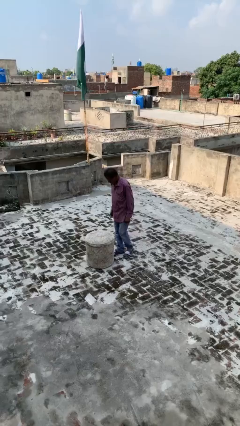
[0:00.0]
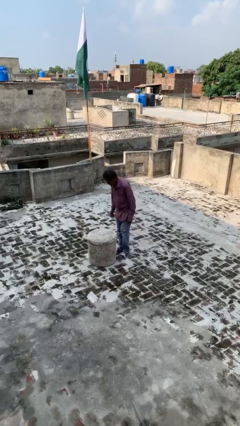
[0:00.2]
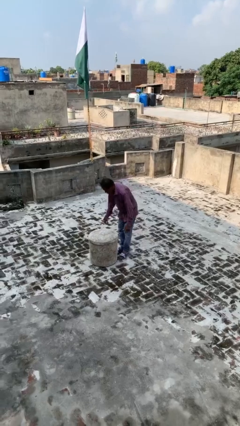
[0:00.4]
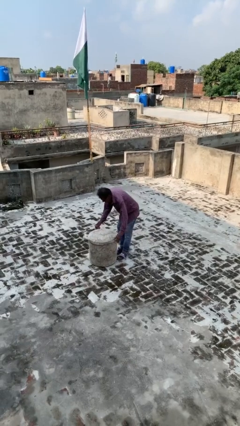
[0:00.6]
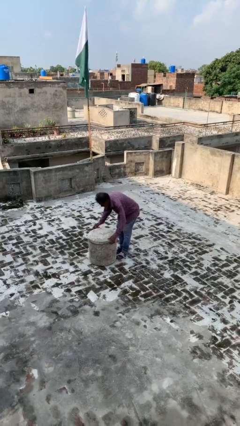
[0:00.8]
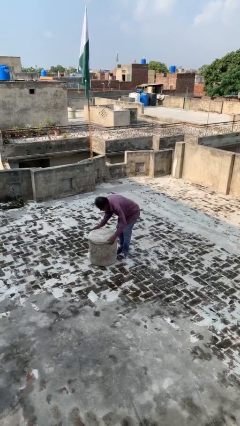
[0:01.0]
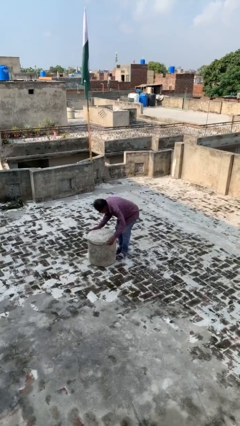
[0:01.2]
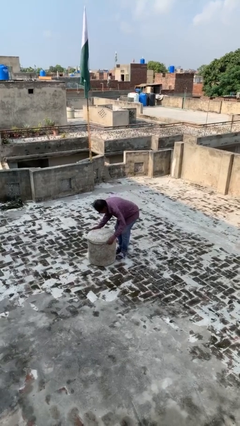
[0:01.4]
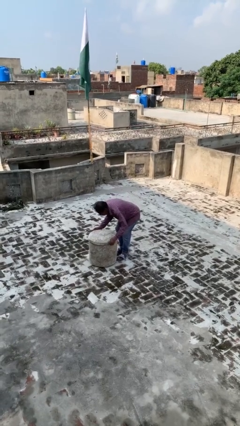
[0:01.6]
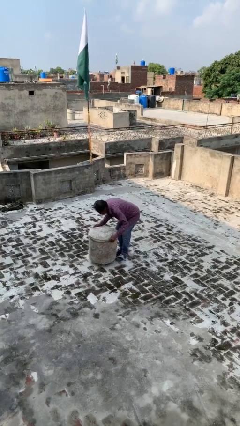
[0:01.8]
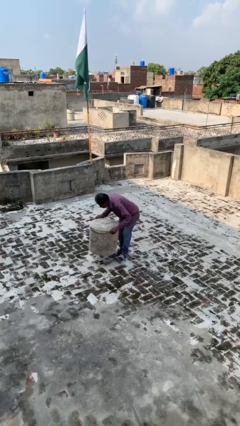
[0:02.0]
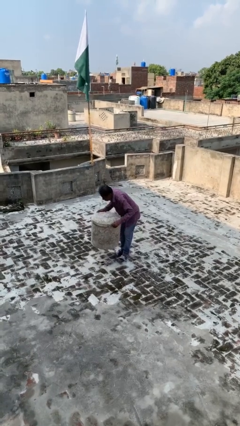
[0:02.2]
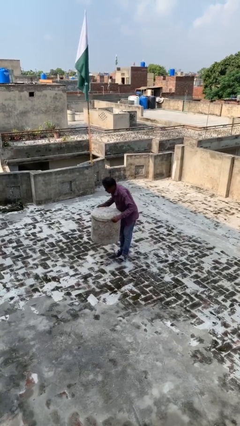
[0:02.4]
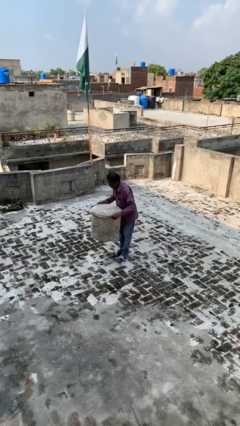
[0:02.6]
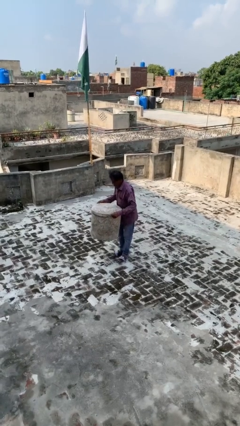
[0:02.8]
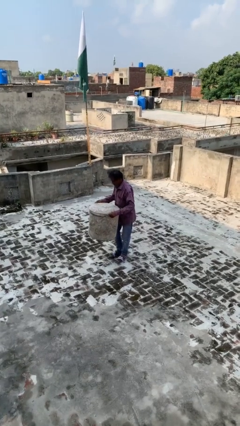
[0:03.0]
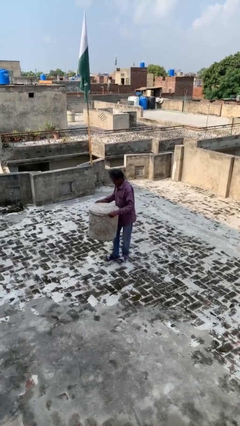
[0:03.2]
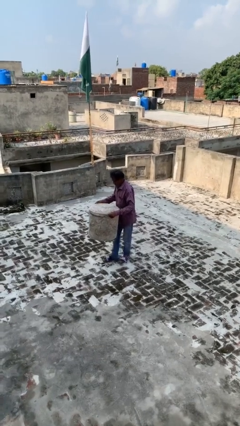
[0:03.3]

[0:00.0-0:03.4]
person picks up object from floor

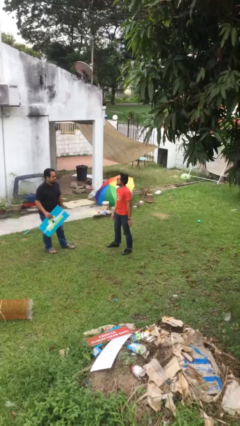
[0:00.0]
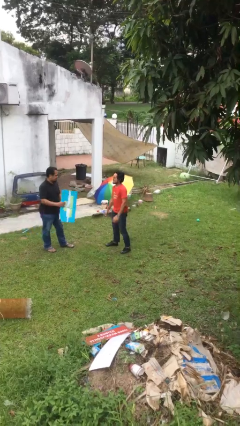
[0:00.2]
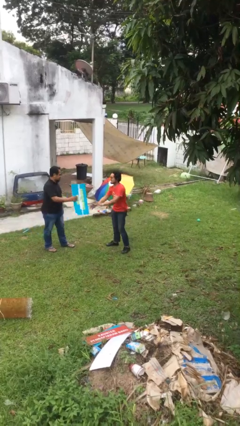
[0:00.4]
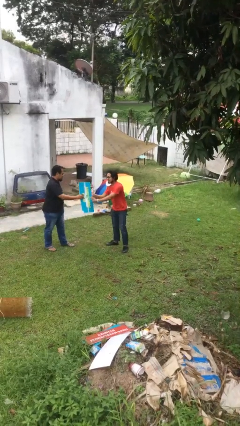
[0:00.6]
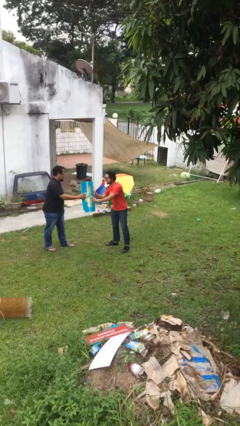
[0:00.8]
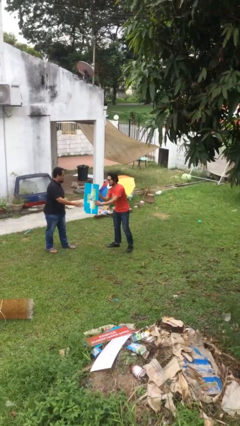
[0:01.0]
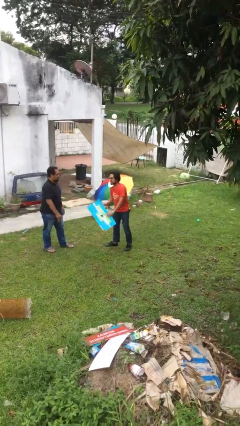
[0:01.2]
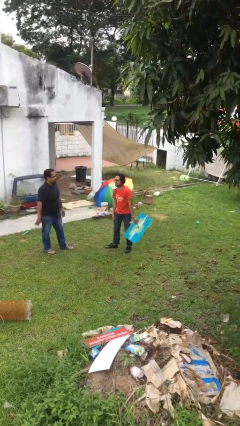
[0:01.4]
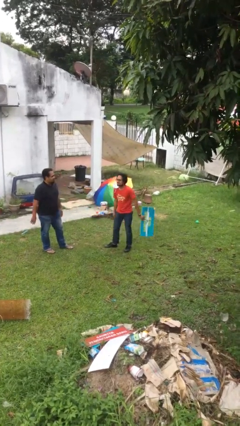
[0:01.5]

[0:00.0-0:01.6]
person transfers object to person

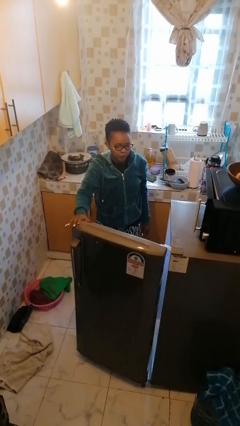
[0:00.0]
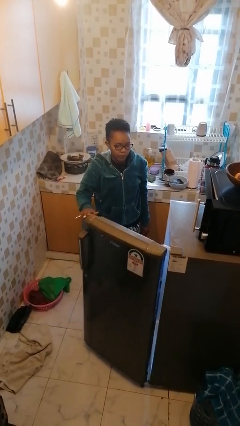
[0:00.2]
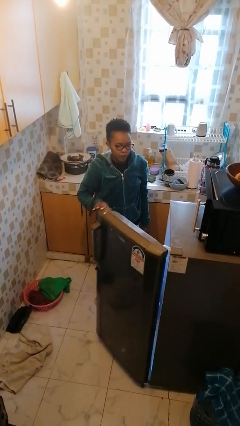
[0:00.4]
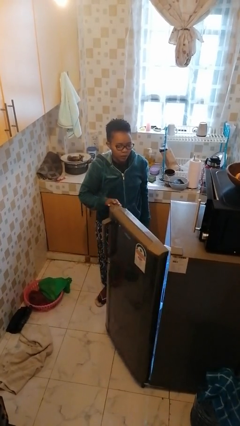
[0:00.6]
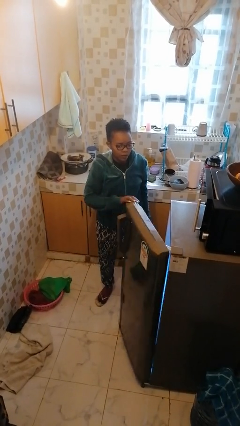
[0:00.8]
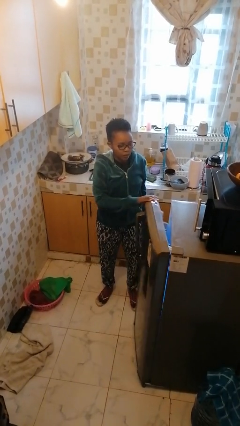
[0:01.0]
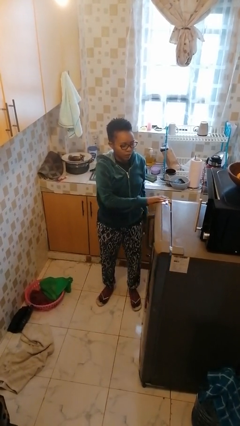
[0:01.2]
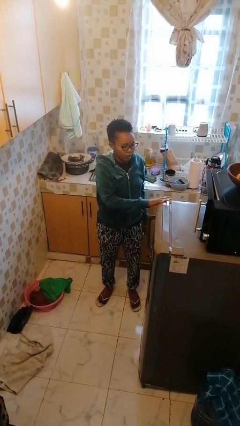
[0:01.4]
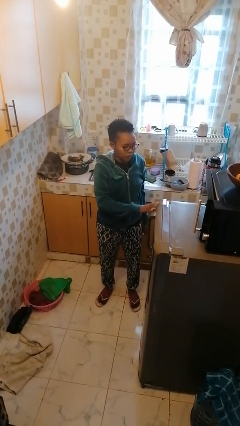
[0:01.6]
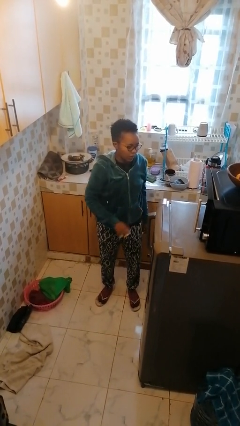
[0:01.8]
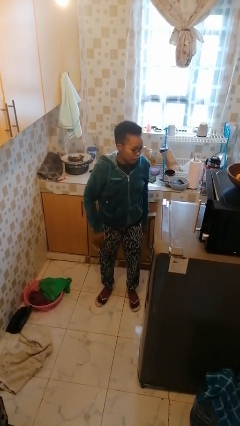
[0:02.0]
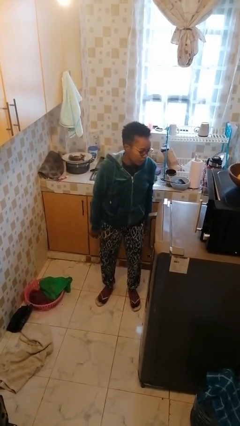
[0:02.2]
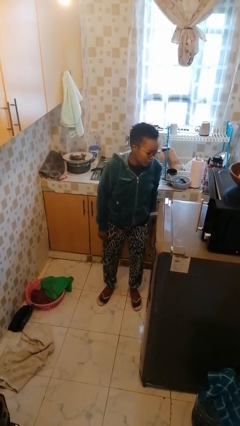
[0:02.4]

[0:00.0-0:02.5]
person closes refrigerator

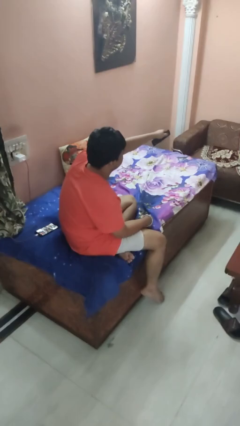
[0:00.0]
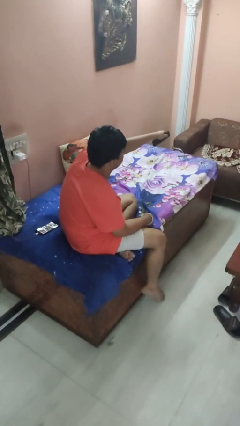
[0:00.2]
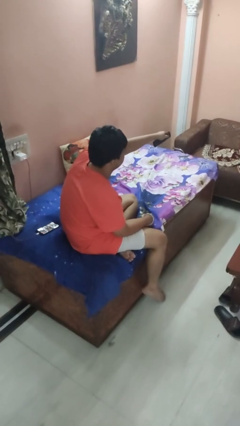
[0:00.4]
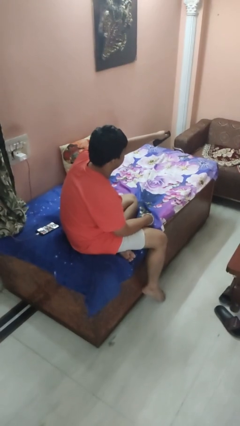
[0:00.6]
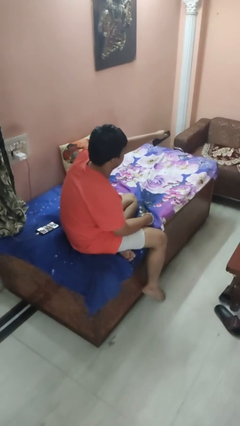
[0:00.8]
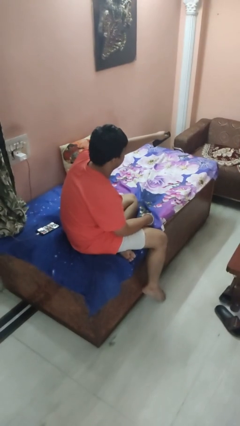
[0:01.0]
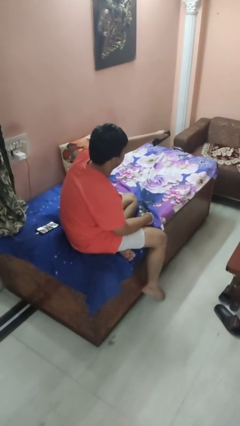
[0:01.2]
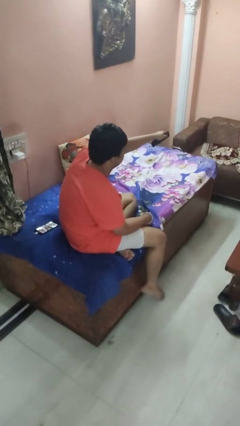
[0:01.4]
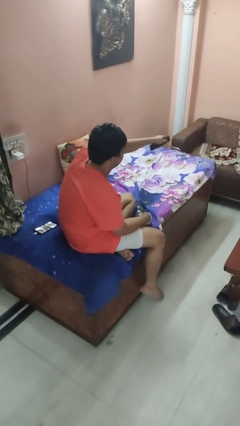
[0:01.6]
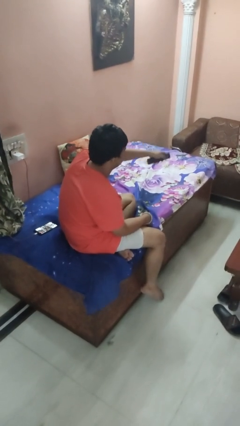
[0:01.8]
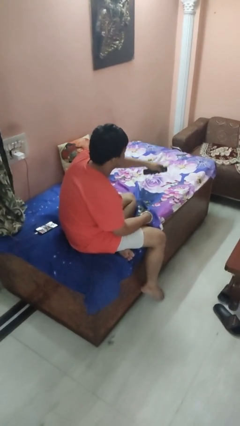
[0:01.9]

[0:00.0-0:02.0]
person uses television remote

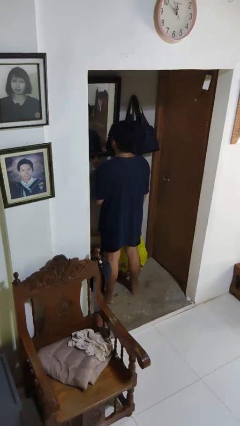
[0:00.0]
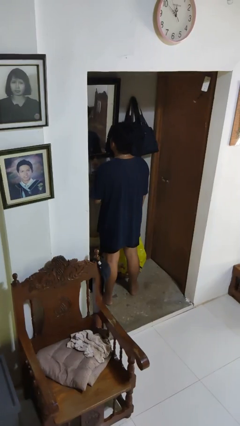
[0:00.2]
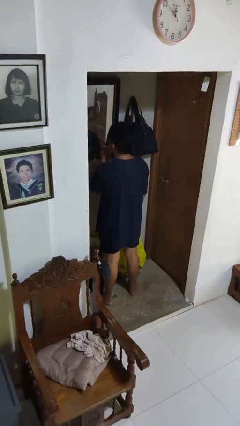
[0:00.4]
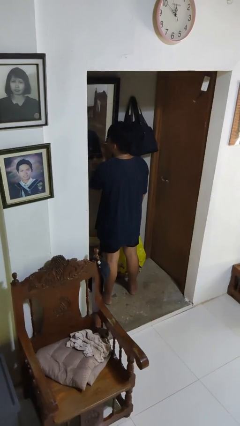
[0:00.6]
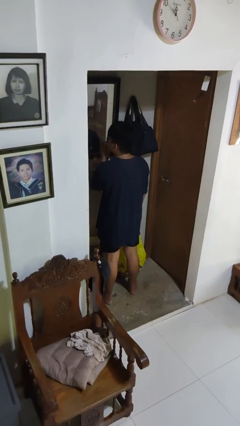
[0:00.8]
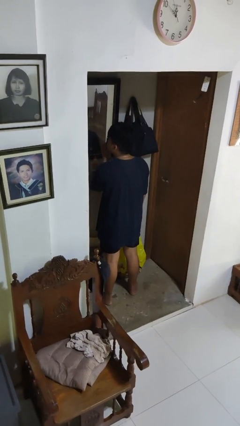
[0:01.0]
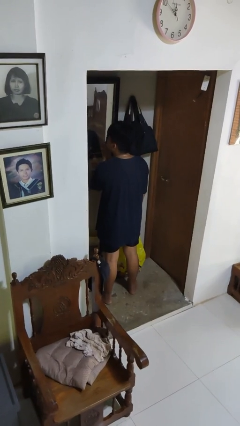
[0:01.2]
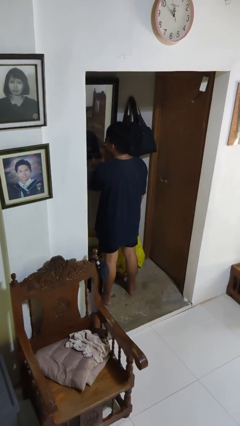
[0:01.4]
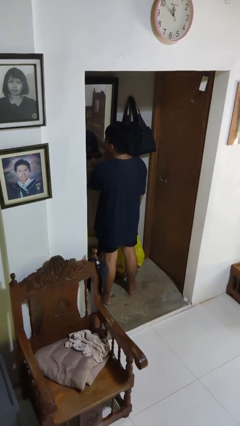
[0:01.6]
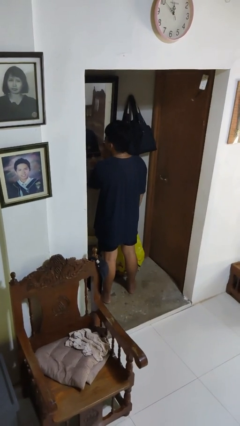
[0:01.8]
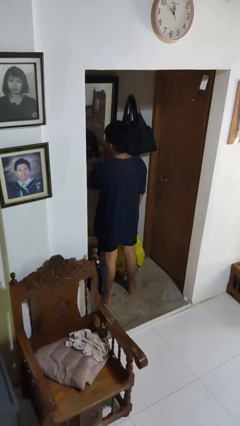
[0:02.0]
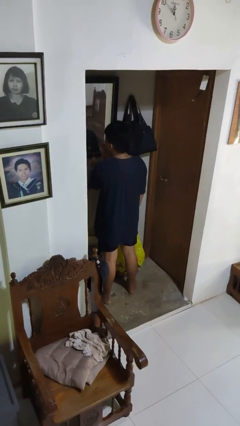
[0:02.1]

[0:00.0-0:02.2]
person applies lip makeup

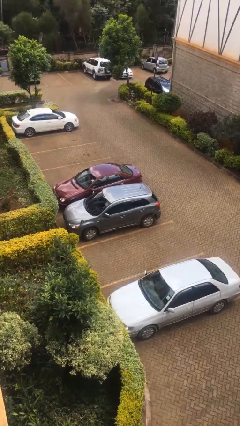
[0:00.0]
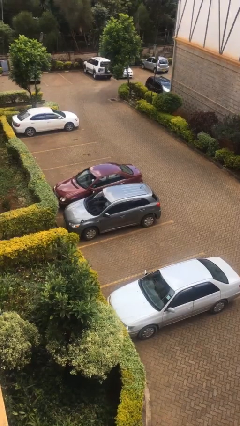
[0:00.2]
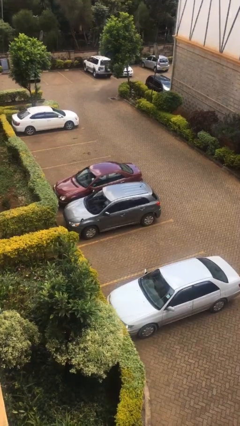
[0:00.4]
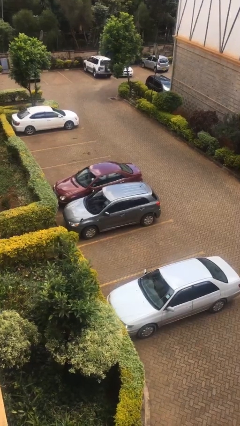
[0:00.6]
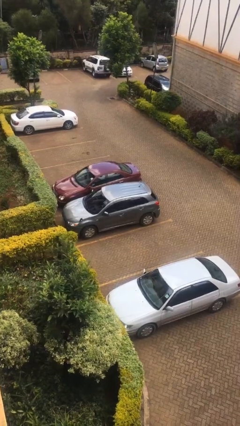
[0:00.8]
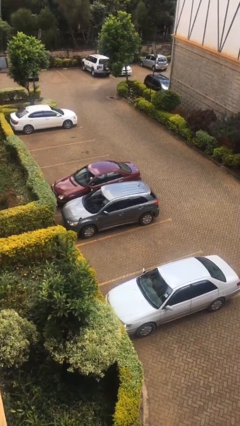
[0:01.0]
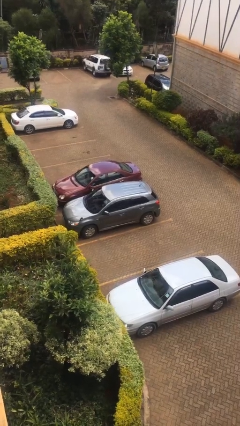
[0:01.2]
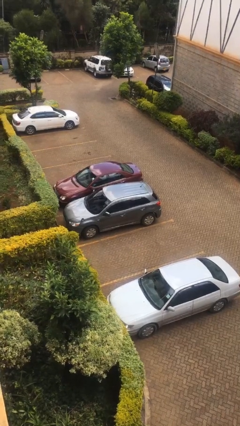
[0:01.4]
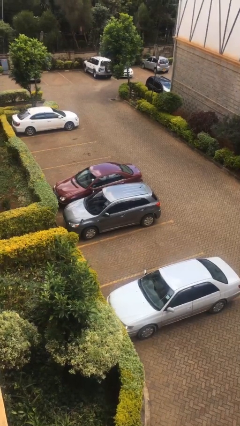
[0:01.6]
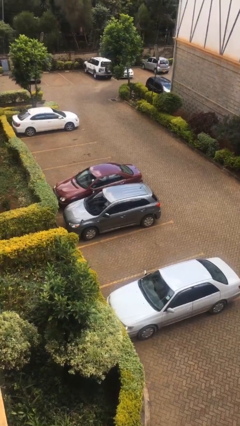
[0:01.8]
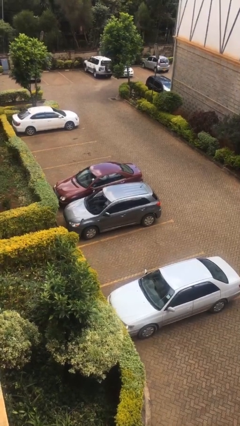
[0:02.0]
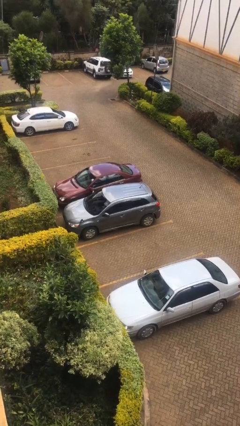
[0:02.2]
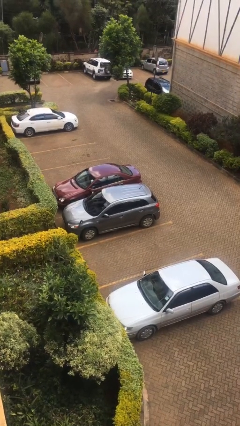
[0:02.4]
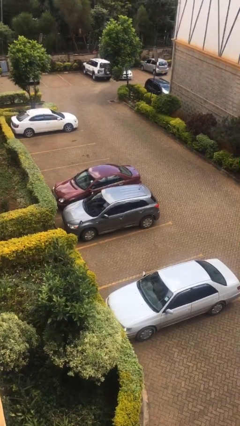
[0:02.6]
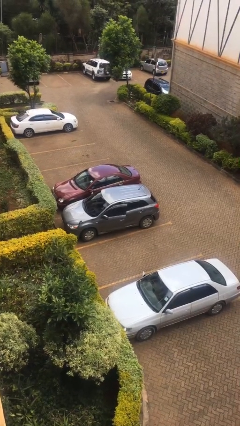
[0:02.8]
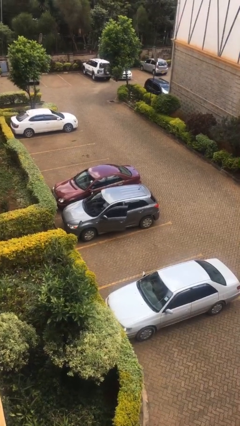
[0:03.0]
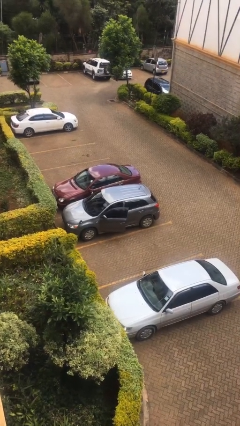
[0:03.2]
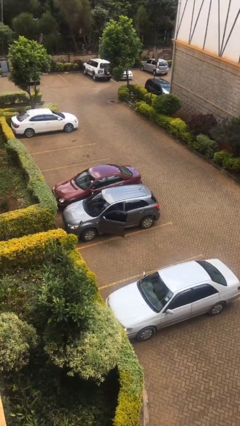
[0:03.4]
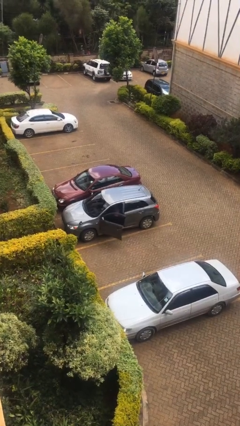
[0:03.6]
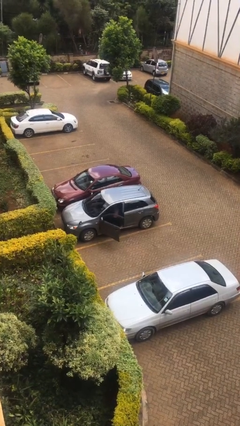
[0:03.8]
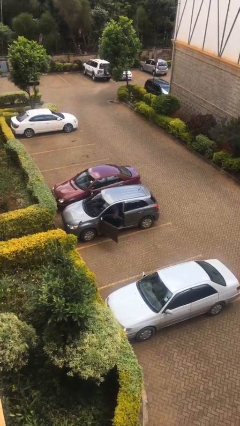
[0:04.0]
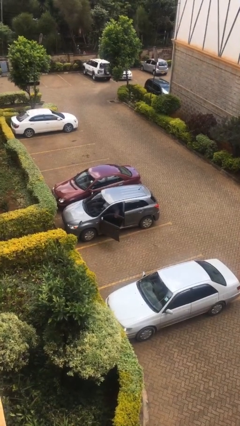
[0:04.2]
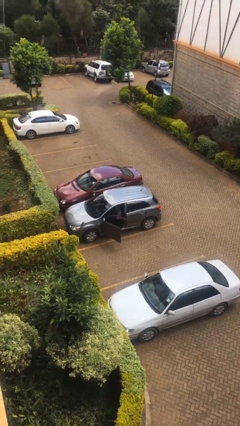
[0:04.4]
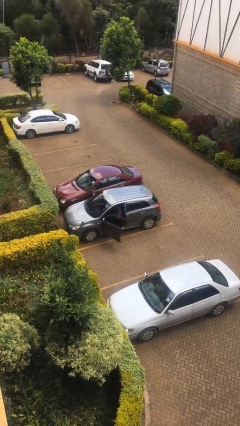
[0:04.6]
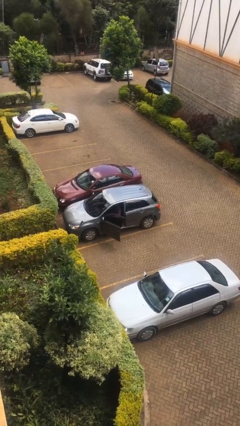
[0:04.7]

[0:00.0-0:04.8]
person opens car door

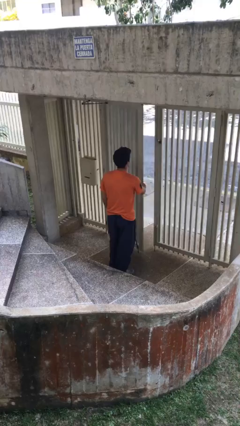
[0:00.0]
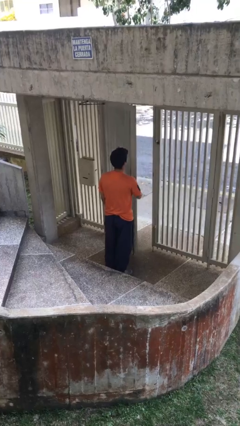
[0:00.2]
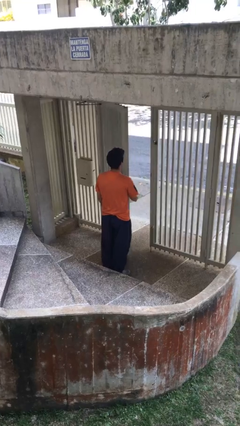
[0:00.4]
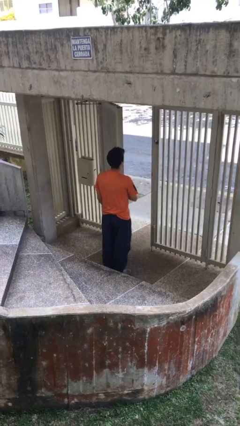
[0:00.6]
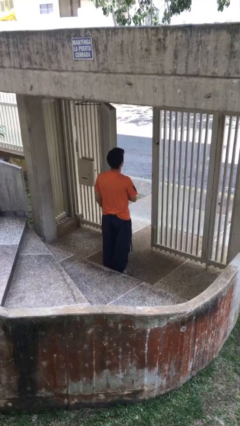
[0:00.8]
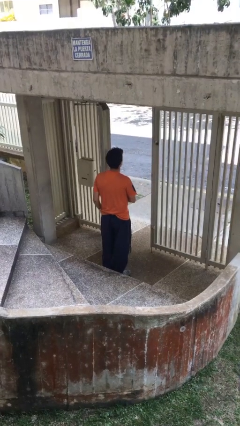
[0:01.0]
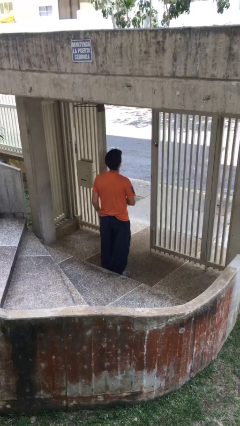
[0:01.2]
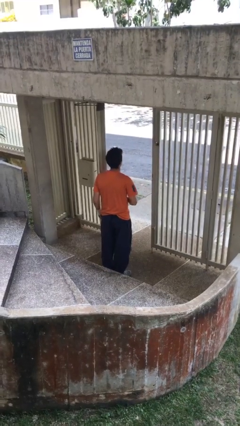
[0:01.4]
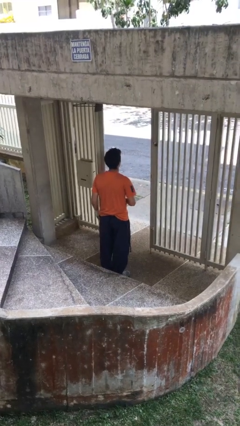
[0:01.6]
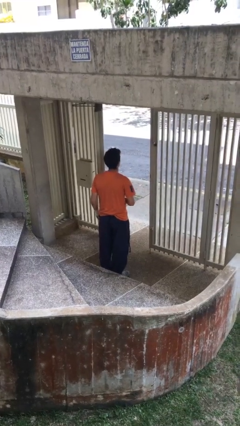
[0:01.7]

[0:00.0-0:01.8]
person opens facility door
